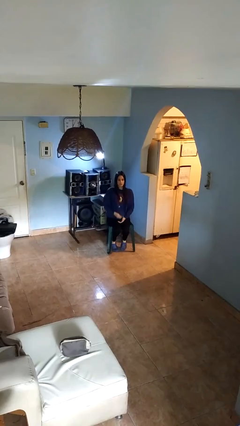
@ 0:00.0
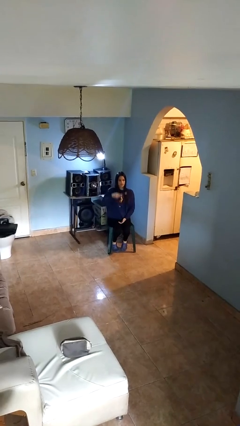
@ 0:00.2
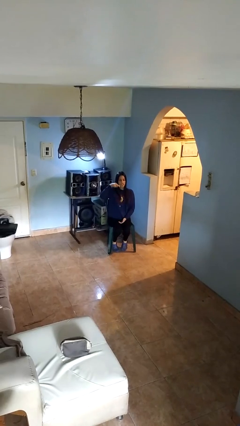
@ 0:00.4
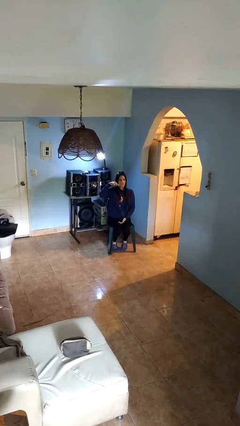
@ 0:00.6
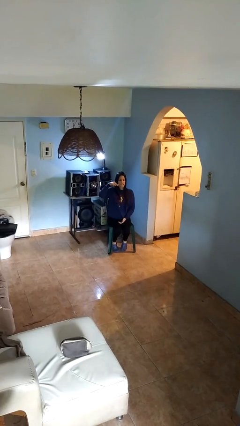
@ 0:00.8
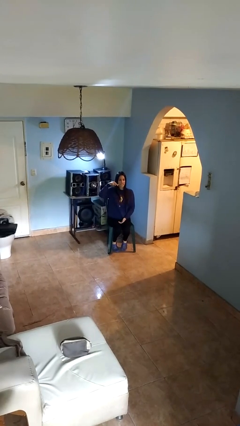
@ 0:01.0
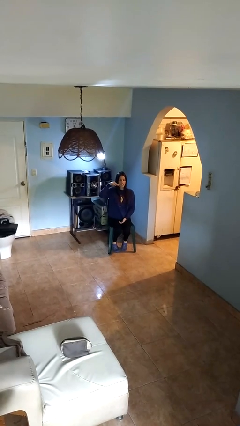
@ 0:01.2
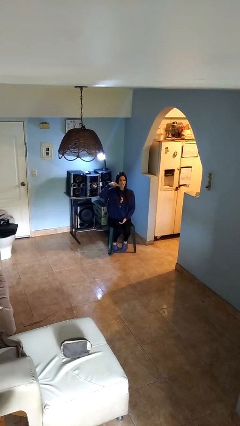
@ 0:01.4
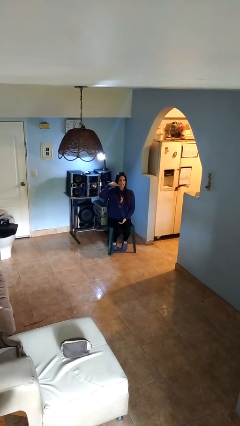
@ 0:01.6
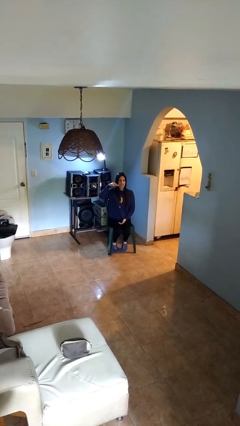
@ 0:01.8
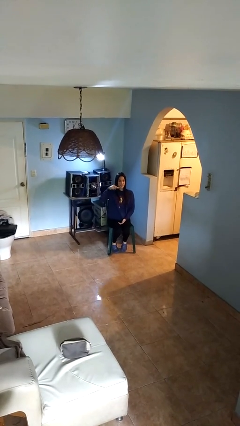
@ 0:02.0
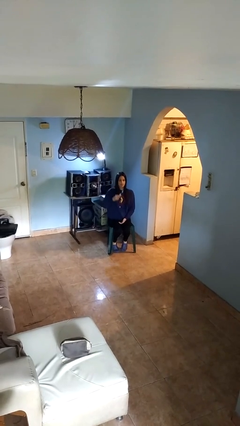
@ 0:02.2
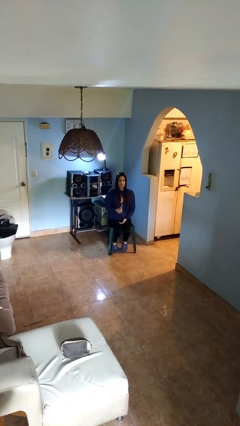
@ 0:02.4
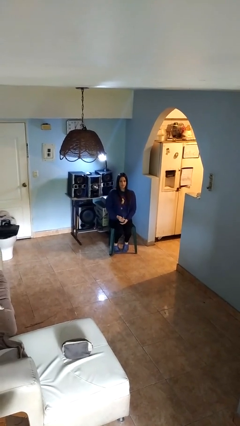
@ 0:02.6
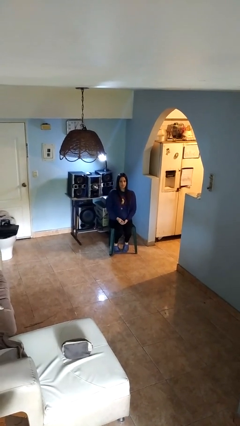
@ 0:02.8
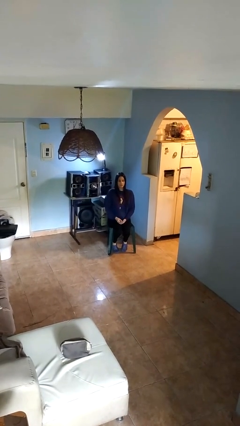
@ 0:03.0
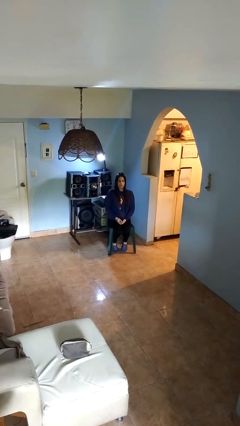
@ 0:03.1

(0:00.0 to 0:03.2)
person brushes teeth

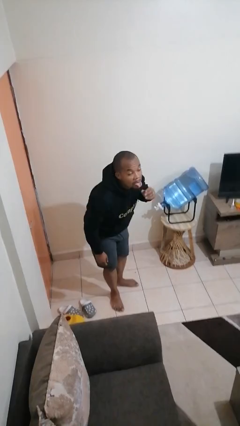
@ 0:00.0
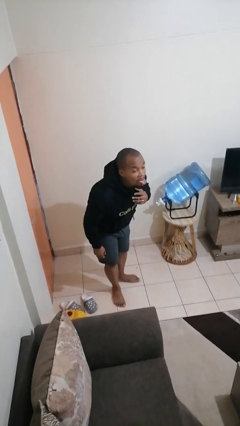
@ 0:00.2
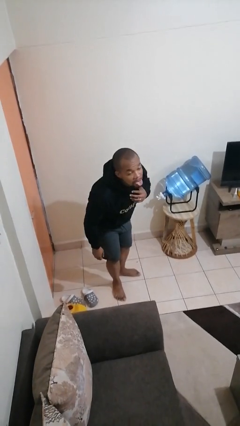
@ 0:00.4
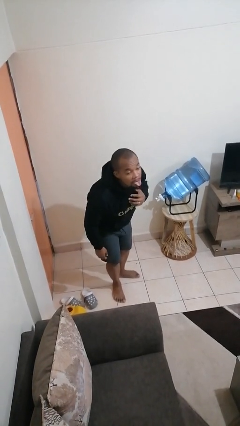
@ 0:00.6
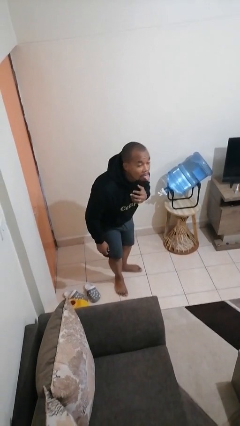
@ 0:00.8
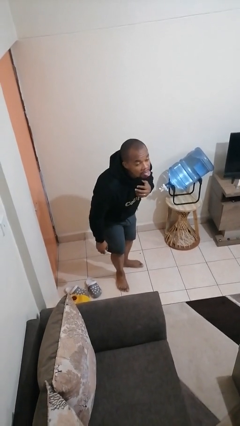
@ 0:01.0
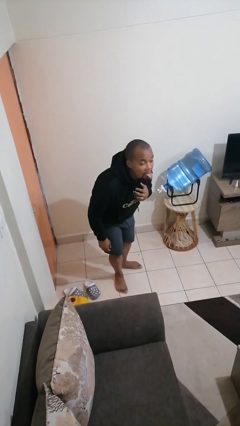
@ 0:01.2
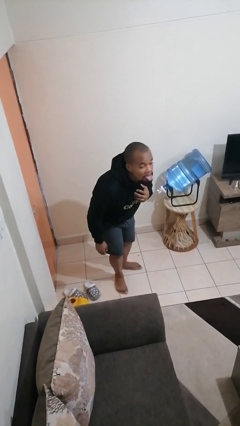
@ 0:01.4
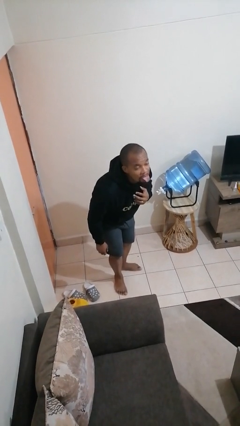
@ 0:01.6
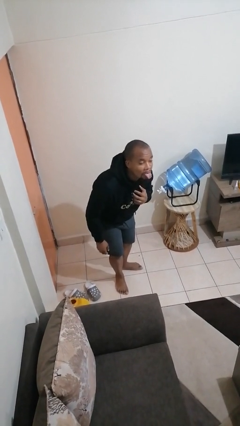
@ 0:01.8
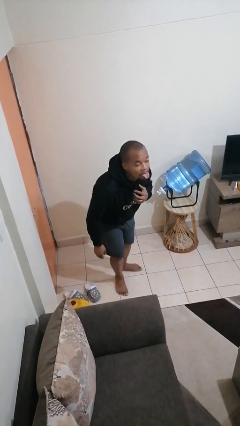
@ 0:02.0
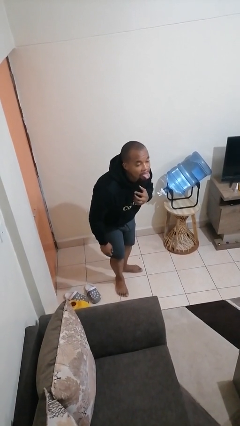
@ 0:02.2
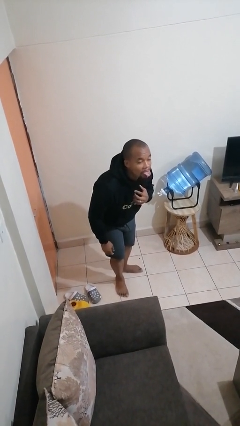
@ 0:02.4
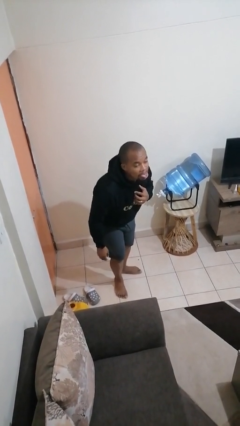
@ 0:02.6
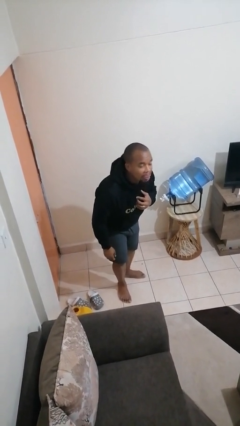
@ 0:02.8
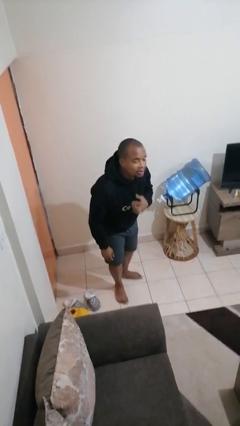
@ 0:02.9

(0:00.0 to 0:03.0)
person sticks out tongue

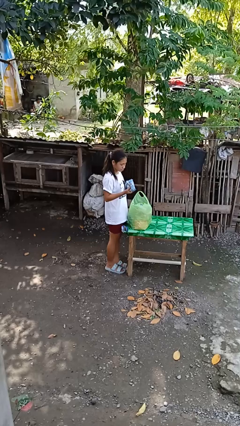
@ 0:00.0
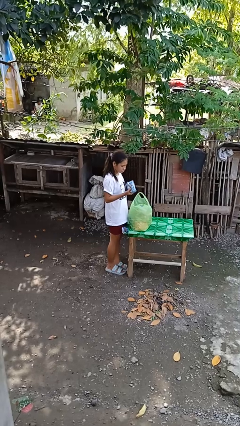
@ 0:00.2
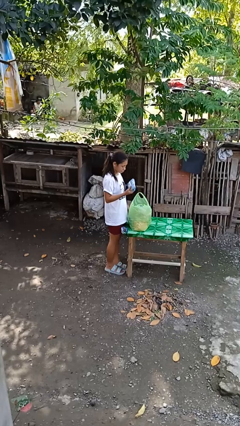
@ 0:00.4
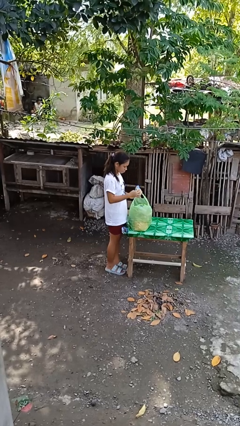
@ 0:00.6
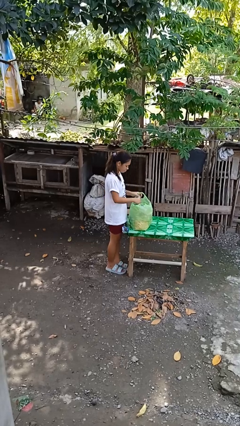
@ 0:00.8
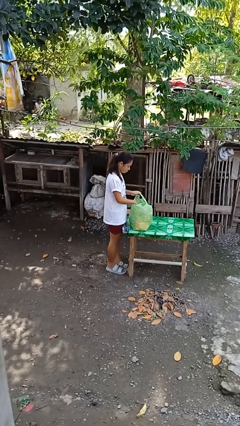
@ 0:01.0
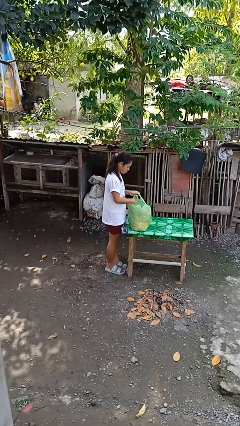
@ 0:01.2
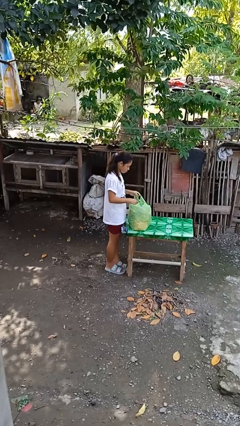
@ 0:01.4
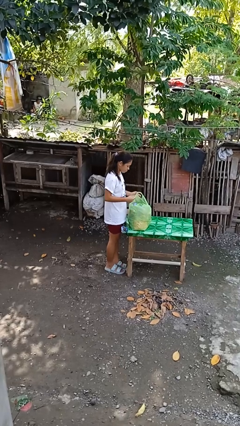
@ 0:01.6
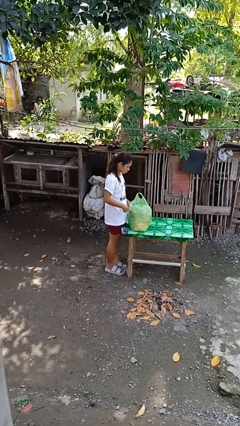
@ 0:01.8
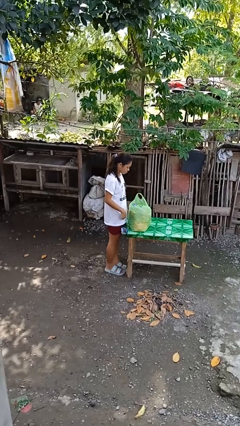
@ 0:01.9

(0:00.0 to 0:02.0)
person hits person with pillow

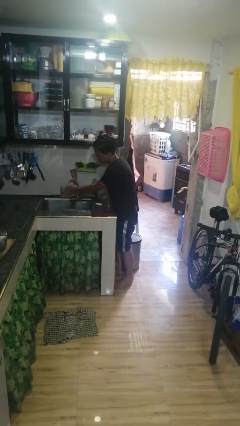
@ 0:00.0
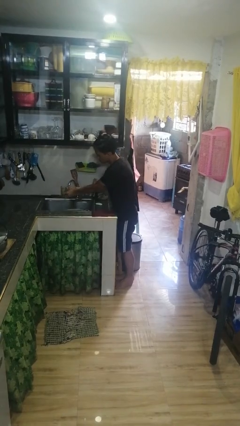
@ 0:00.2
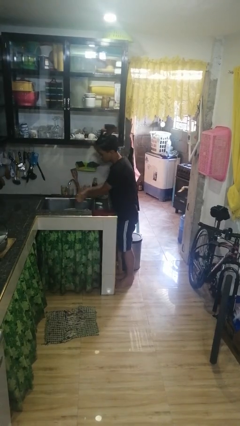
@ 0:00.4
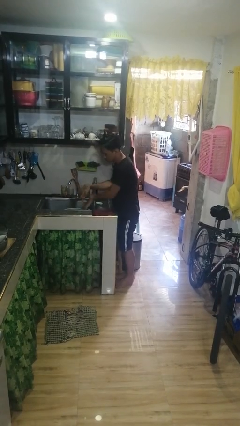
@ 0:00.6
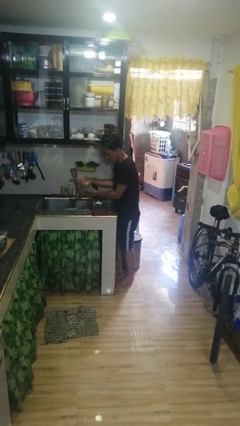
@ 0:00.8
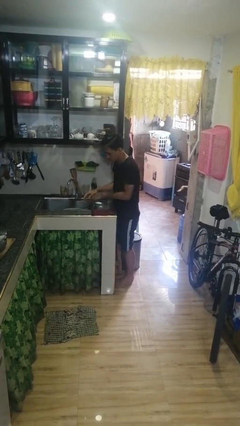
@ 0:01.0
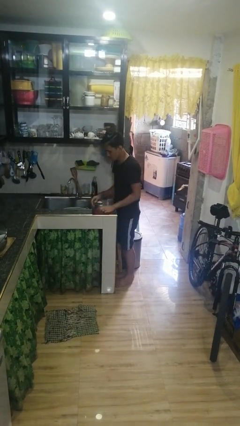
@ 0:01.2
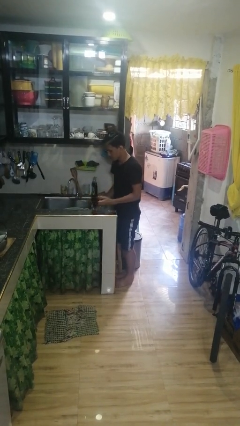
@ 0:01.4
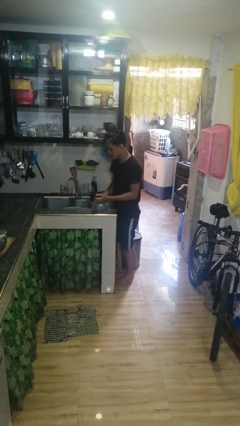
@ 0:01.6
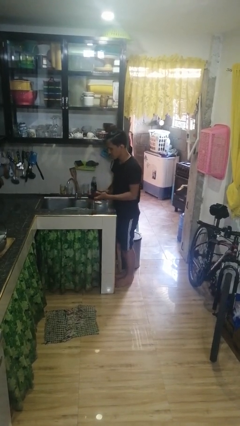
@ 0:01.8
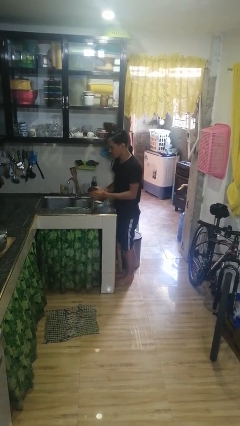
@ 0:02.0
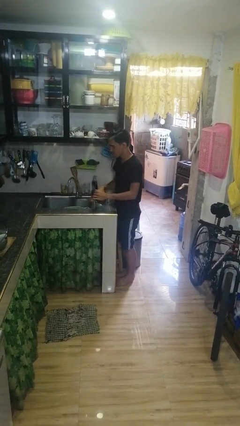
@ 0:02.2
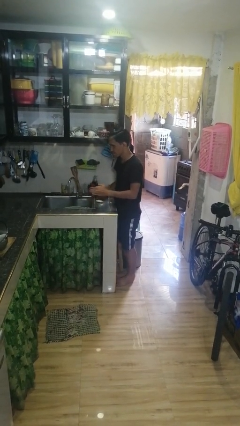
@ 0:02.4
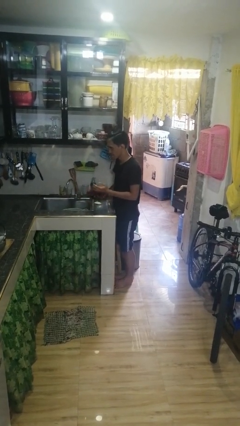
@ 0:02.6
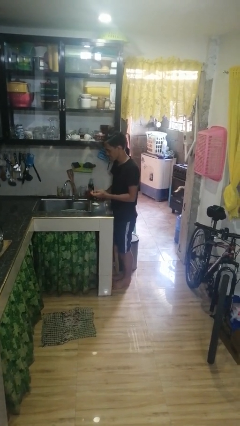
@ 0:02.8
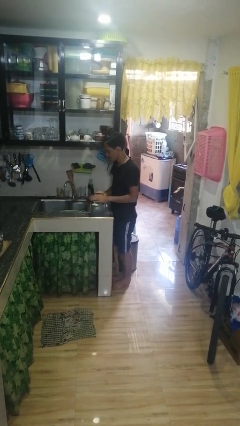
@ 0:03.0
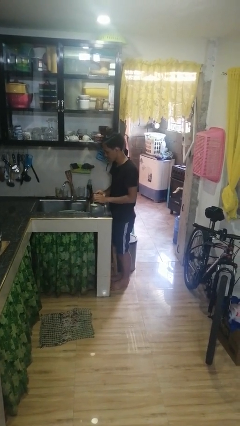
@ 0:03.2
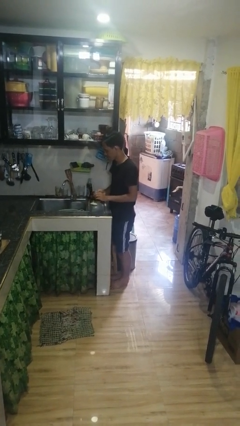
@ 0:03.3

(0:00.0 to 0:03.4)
person dries hands with towel

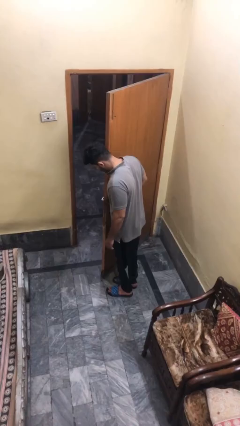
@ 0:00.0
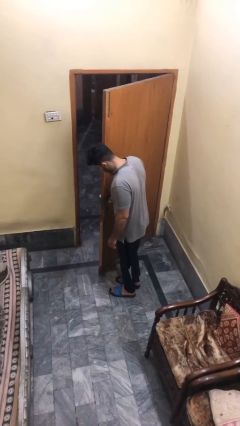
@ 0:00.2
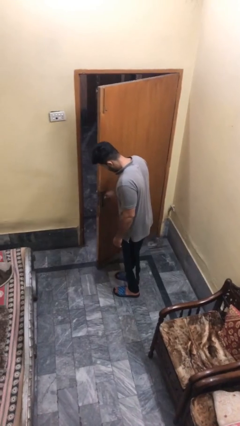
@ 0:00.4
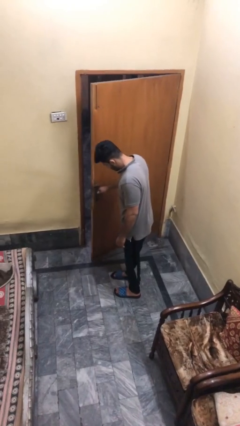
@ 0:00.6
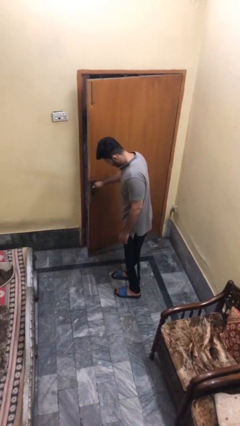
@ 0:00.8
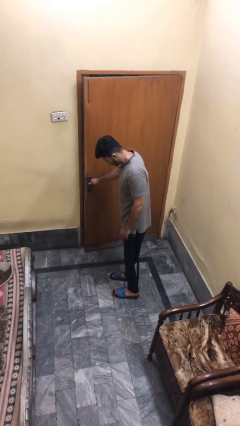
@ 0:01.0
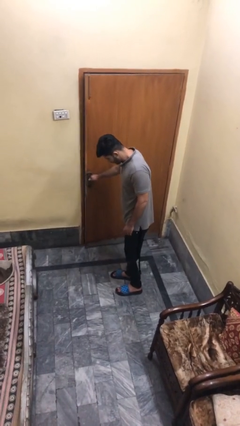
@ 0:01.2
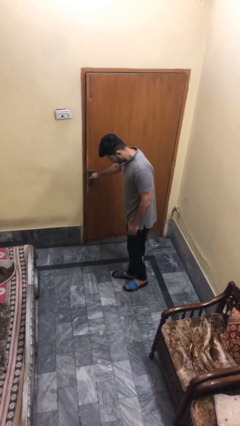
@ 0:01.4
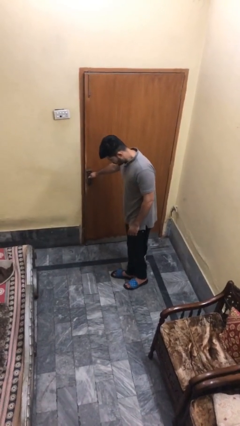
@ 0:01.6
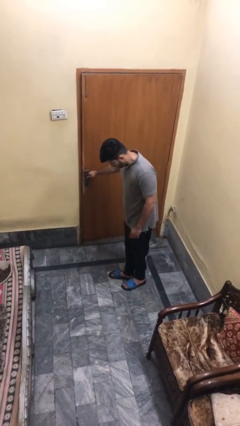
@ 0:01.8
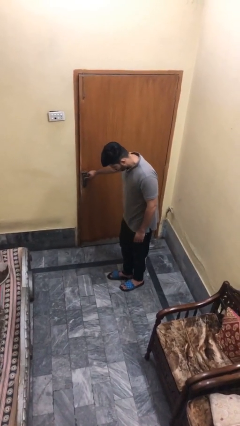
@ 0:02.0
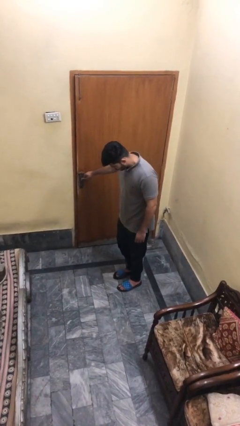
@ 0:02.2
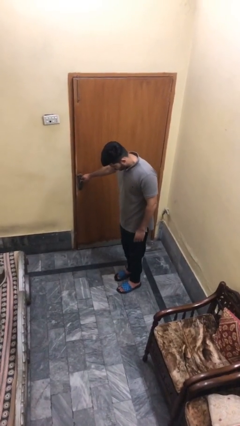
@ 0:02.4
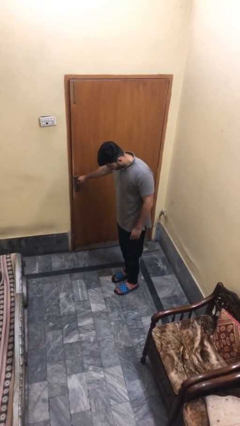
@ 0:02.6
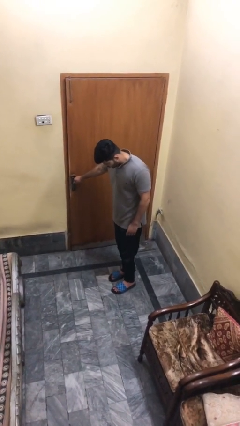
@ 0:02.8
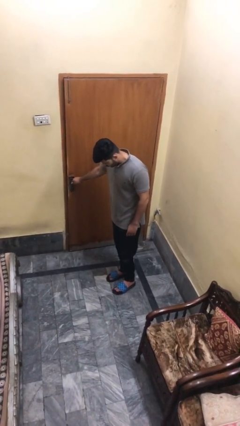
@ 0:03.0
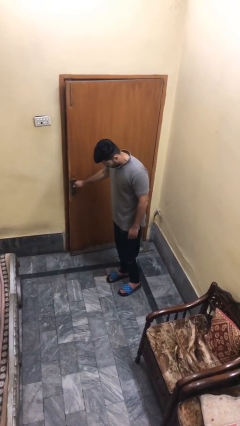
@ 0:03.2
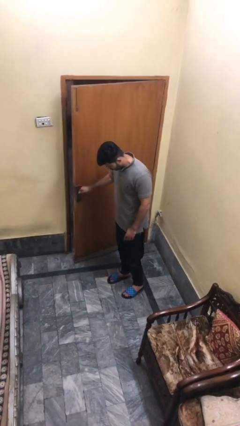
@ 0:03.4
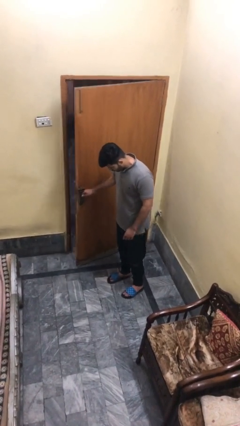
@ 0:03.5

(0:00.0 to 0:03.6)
person closes facility door

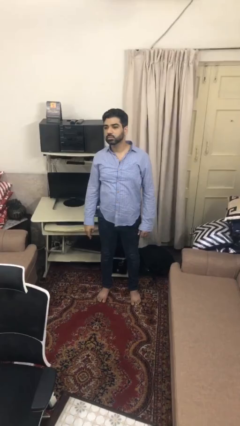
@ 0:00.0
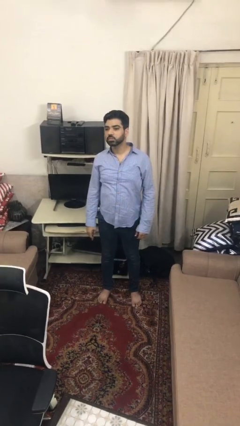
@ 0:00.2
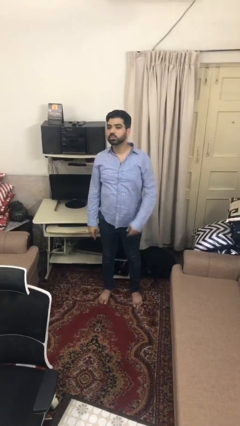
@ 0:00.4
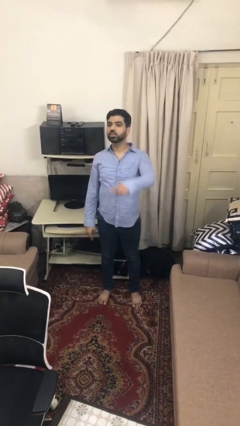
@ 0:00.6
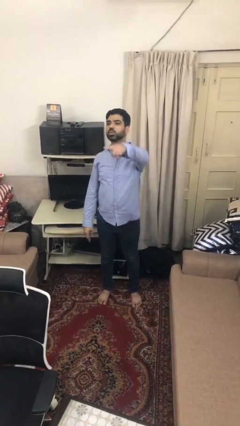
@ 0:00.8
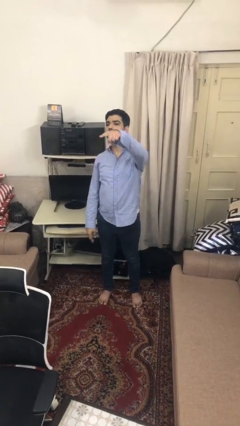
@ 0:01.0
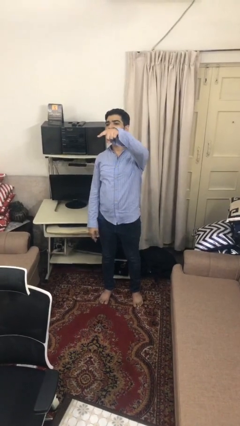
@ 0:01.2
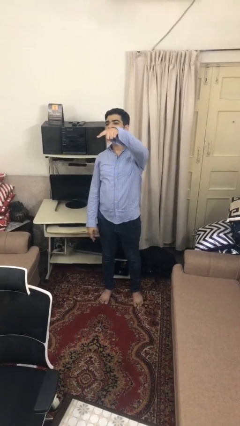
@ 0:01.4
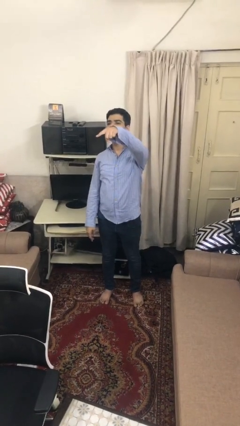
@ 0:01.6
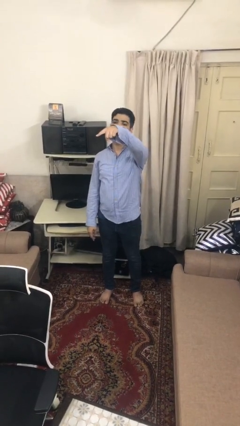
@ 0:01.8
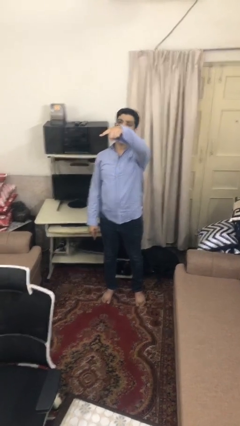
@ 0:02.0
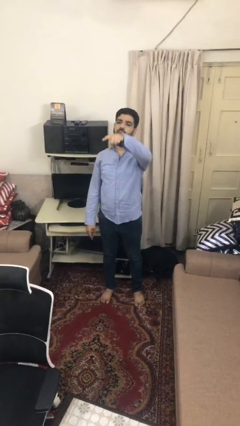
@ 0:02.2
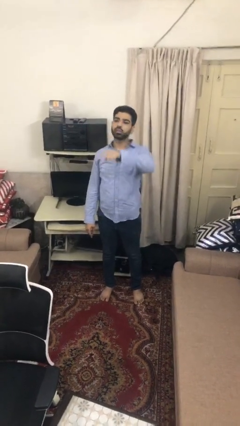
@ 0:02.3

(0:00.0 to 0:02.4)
person points at person
